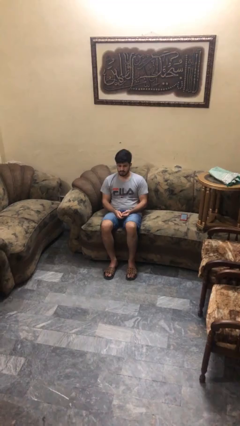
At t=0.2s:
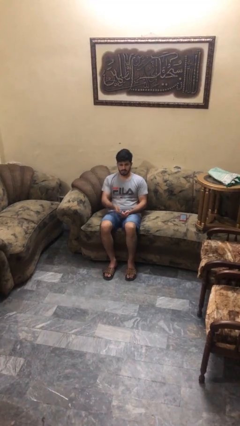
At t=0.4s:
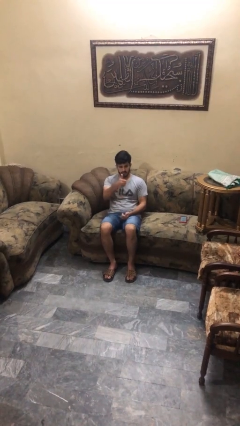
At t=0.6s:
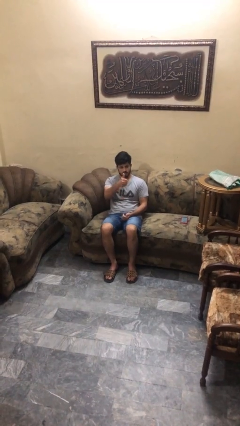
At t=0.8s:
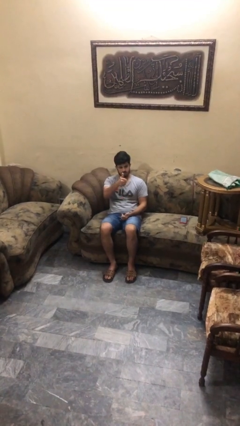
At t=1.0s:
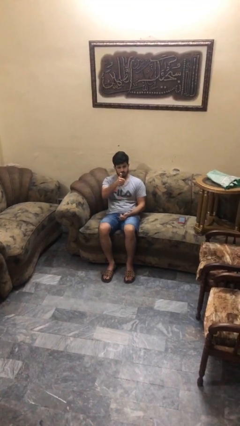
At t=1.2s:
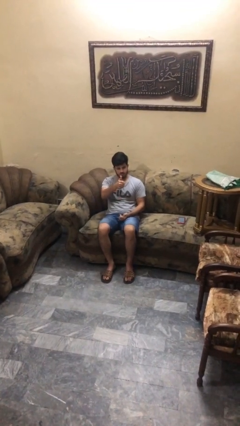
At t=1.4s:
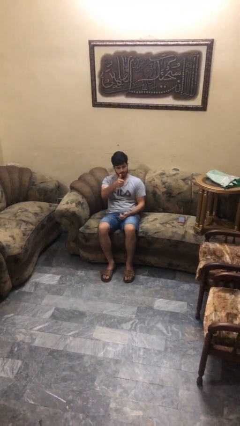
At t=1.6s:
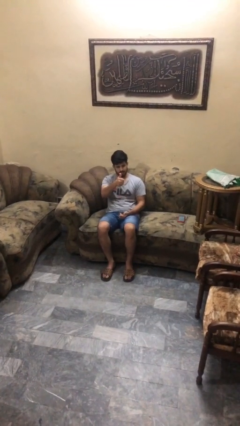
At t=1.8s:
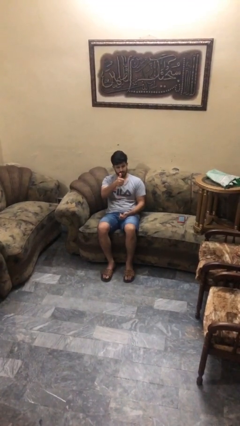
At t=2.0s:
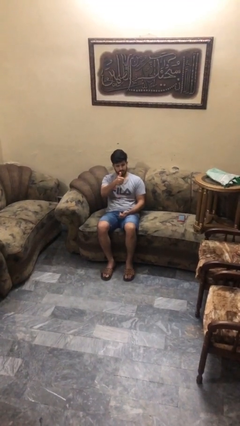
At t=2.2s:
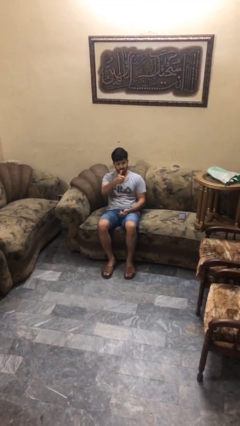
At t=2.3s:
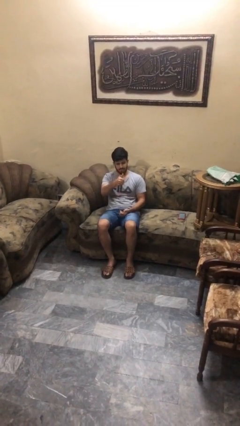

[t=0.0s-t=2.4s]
person gestures thumbs up

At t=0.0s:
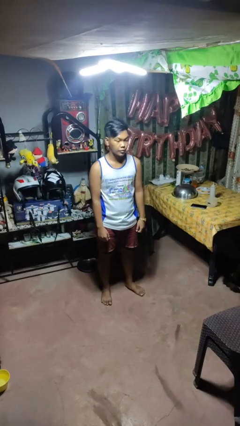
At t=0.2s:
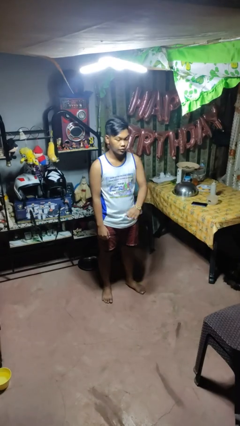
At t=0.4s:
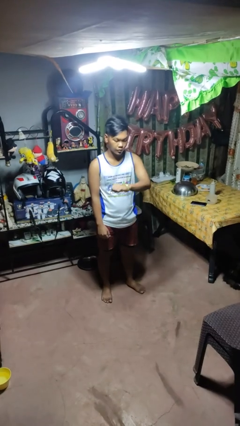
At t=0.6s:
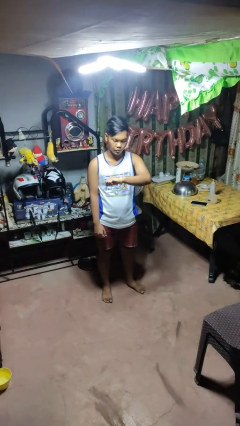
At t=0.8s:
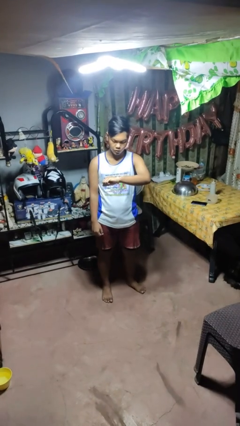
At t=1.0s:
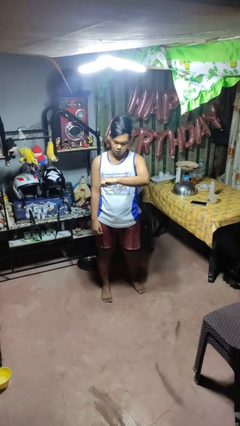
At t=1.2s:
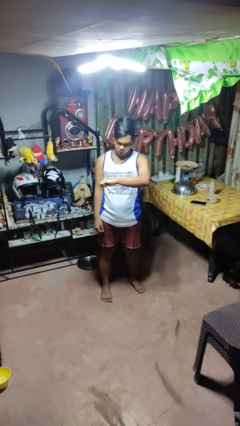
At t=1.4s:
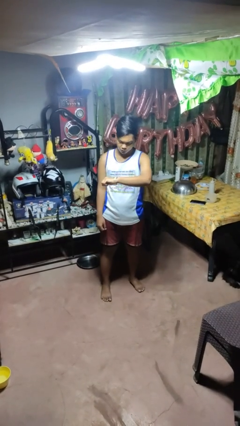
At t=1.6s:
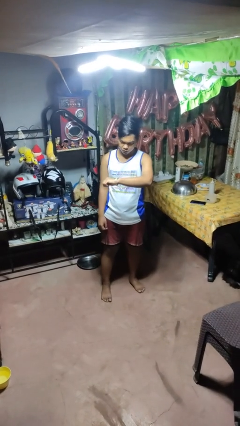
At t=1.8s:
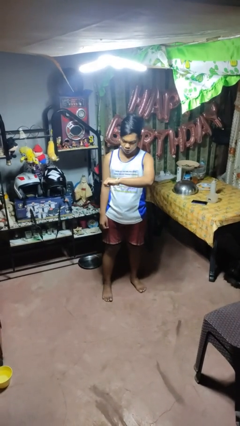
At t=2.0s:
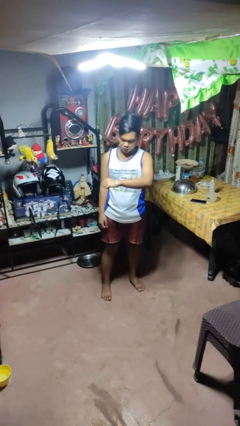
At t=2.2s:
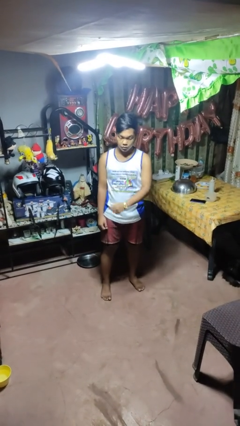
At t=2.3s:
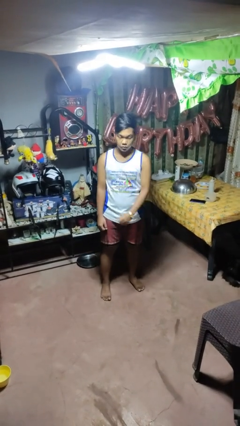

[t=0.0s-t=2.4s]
person looks at wristwatch

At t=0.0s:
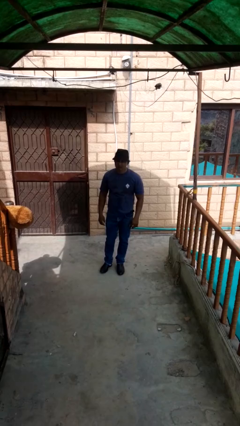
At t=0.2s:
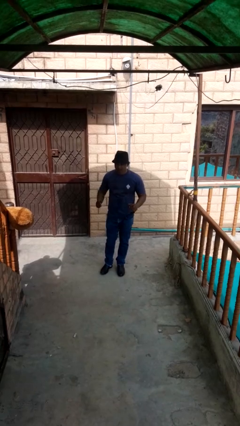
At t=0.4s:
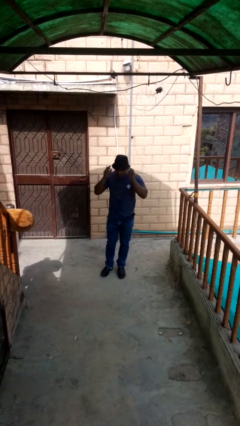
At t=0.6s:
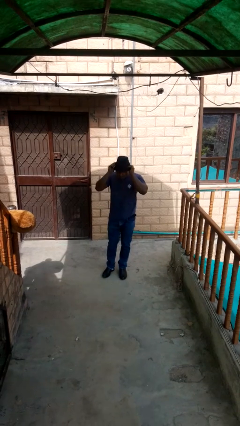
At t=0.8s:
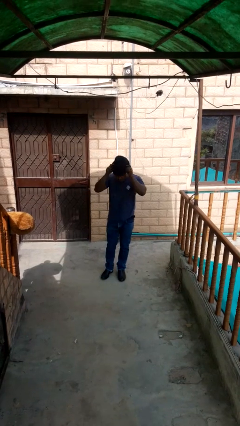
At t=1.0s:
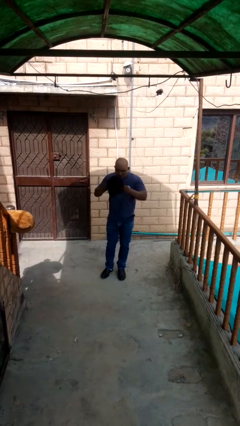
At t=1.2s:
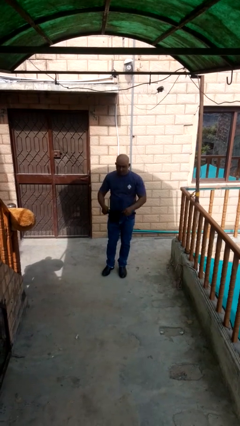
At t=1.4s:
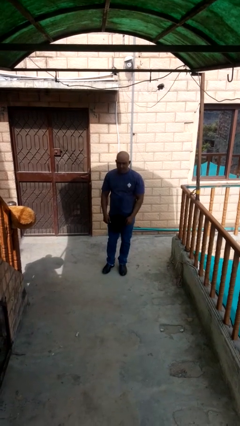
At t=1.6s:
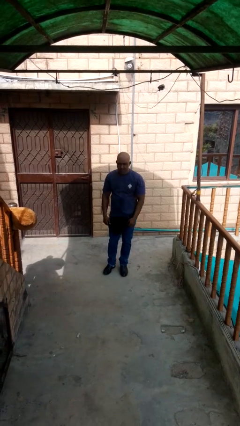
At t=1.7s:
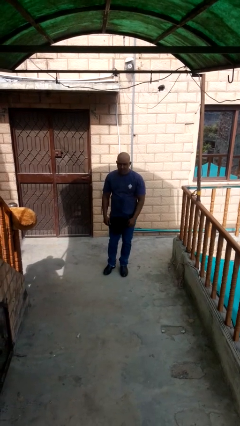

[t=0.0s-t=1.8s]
person takes off hat

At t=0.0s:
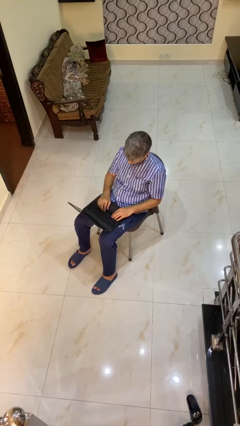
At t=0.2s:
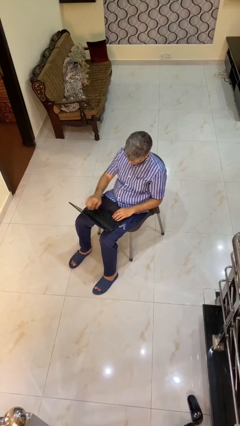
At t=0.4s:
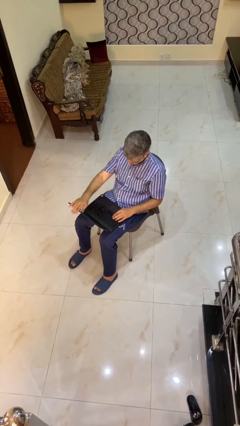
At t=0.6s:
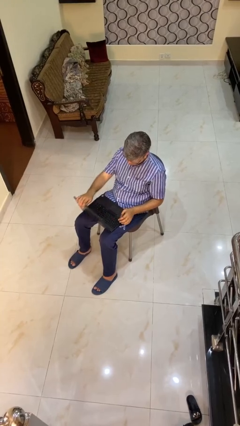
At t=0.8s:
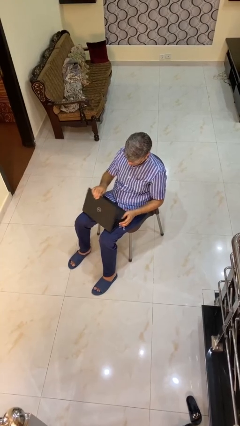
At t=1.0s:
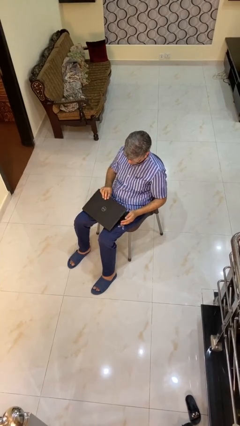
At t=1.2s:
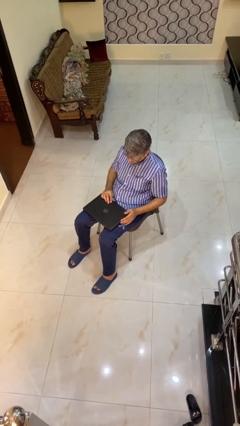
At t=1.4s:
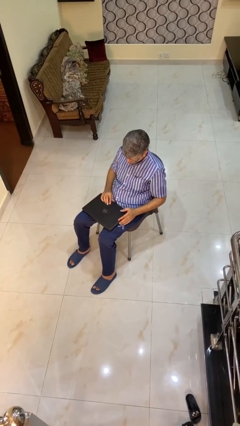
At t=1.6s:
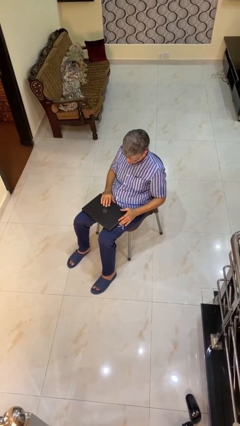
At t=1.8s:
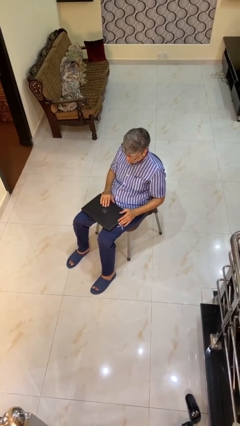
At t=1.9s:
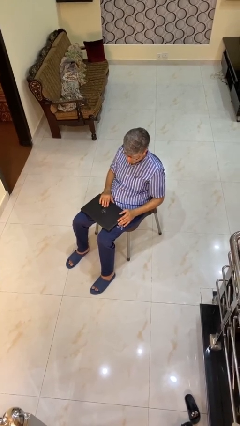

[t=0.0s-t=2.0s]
person closes laptop

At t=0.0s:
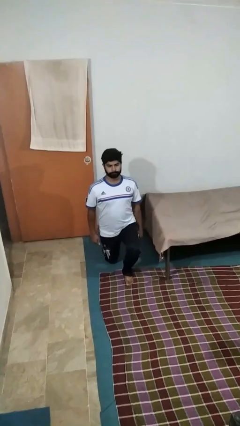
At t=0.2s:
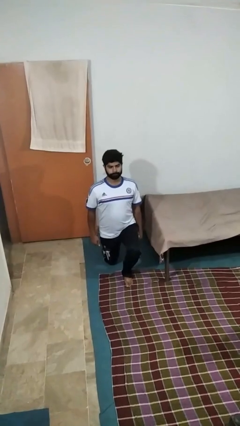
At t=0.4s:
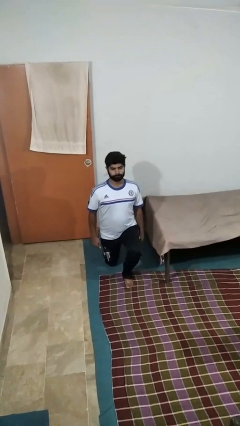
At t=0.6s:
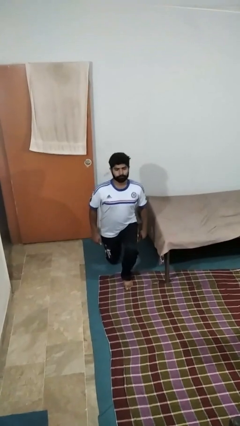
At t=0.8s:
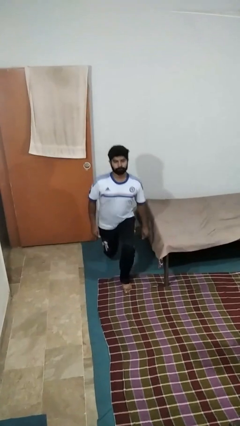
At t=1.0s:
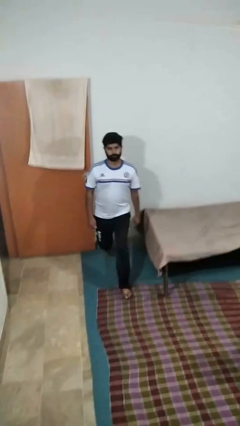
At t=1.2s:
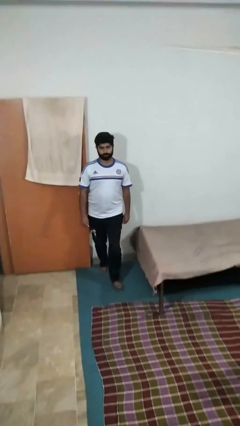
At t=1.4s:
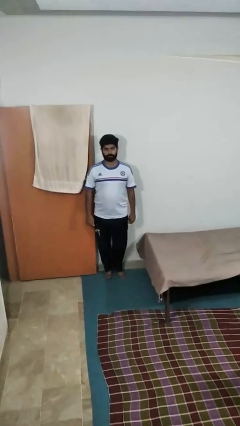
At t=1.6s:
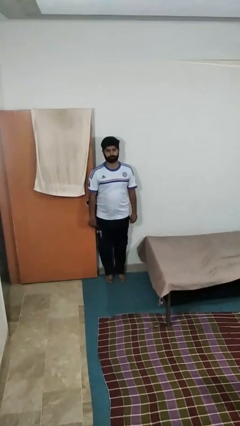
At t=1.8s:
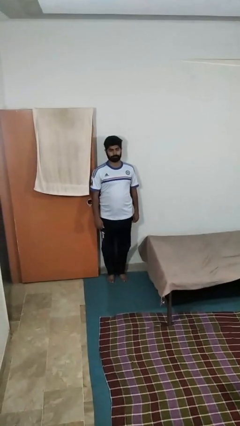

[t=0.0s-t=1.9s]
person stands up from floor

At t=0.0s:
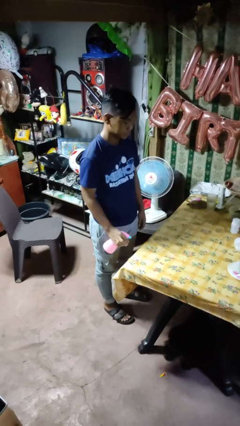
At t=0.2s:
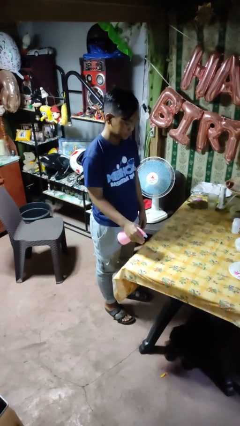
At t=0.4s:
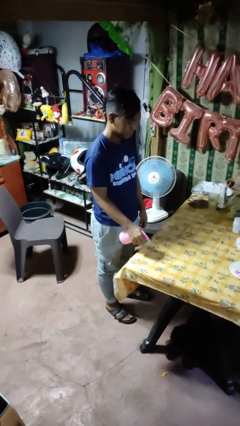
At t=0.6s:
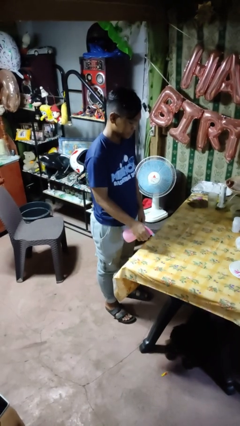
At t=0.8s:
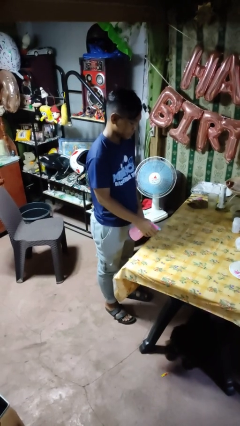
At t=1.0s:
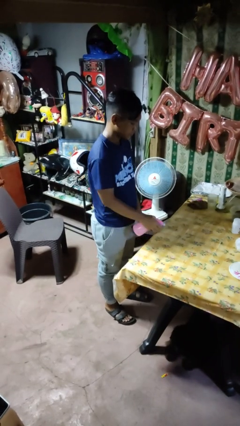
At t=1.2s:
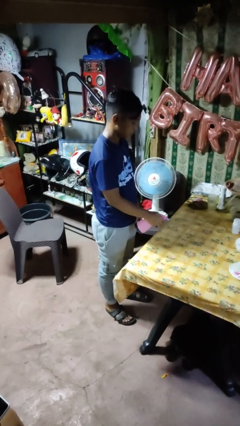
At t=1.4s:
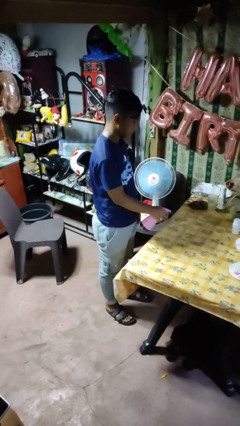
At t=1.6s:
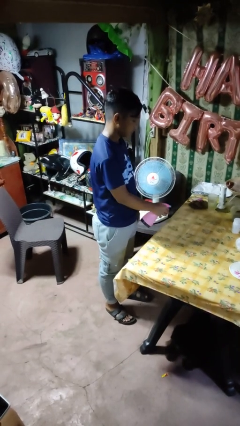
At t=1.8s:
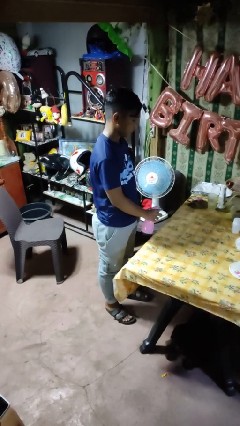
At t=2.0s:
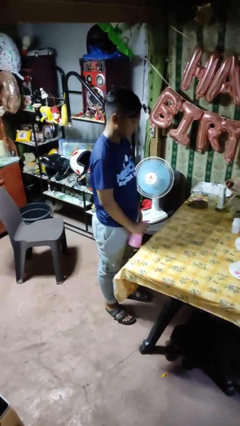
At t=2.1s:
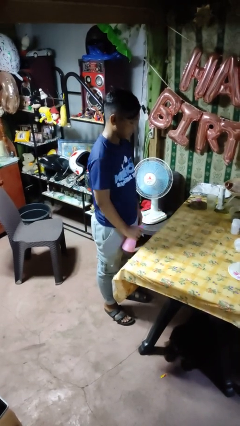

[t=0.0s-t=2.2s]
person sprays from bottle

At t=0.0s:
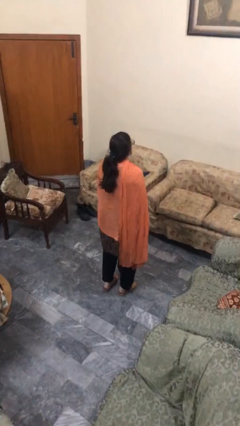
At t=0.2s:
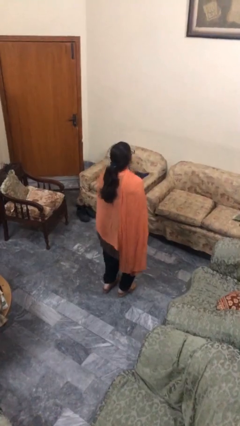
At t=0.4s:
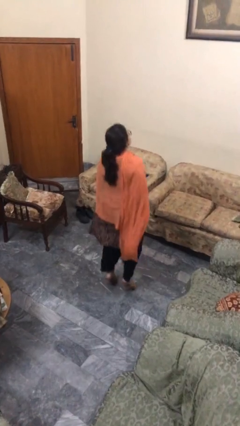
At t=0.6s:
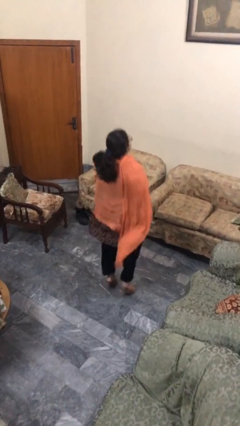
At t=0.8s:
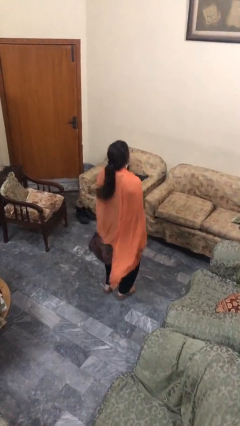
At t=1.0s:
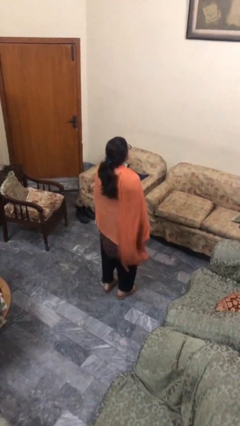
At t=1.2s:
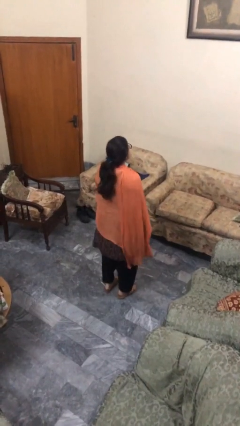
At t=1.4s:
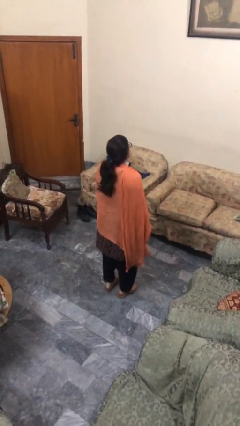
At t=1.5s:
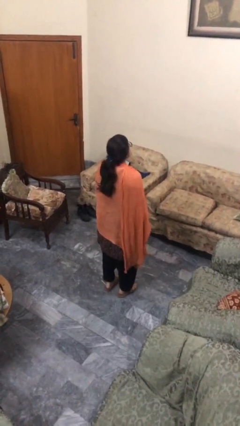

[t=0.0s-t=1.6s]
person jumps

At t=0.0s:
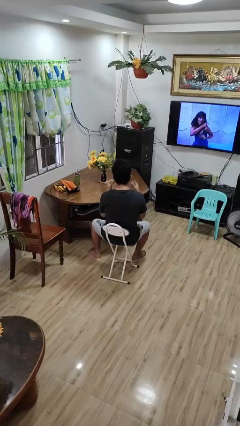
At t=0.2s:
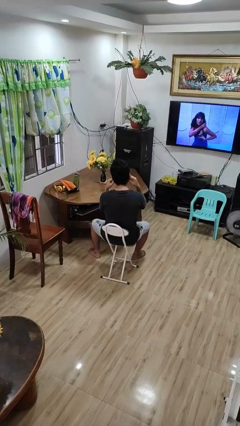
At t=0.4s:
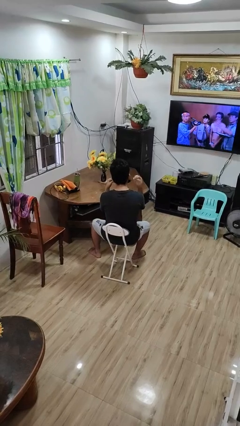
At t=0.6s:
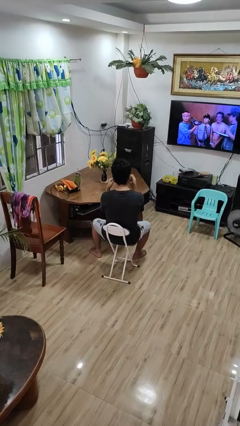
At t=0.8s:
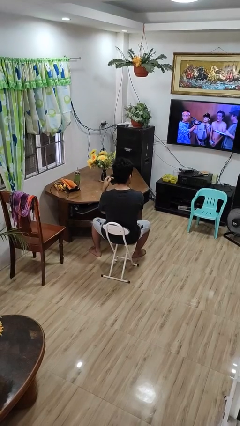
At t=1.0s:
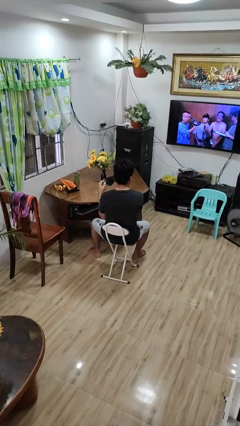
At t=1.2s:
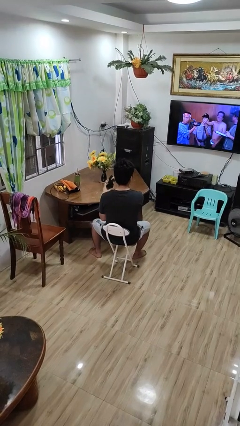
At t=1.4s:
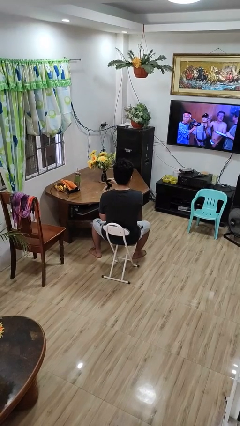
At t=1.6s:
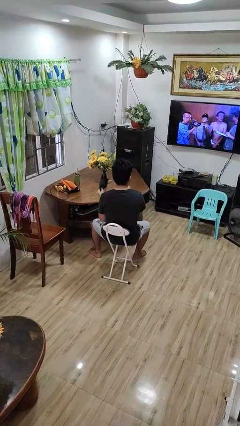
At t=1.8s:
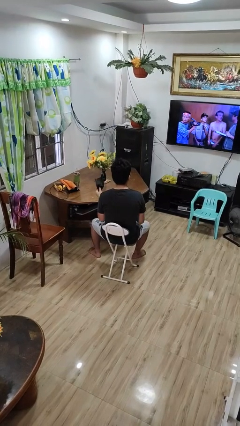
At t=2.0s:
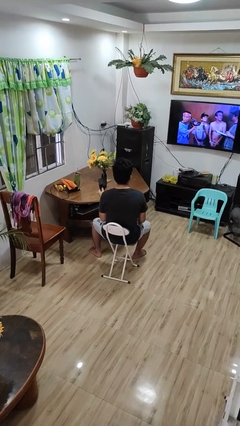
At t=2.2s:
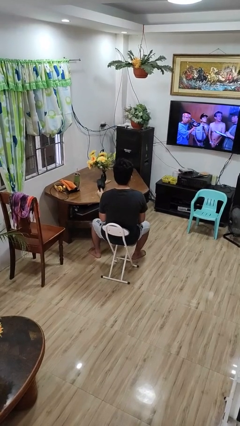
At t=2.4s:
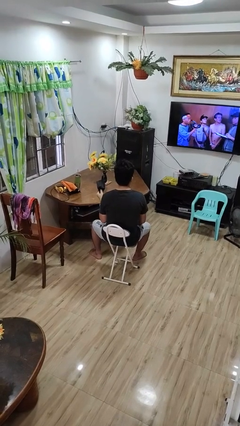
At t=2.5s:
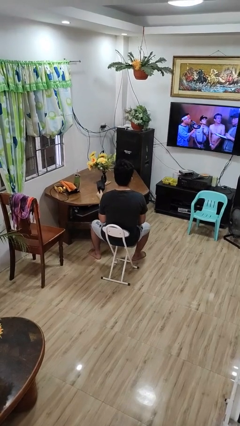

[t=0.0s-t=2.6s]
person takes off facemask
